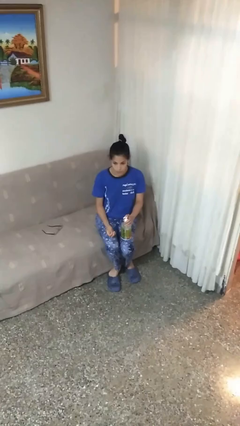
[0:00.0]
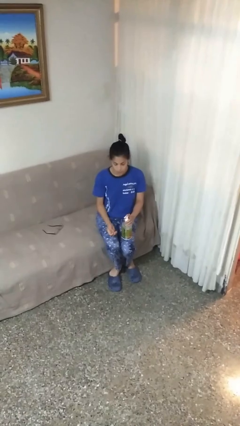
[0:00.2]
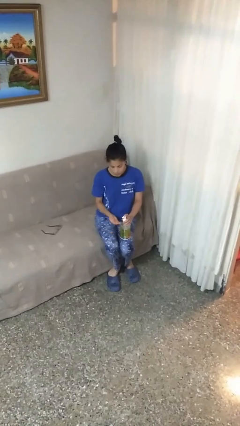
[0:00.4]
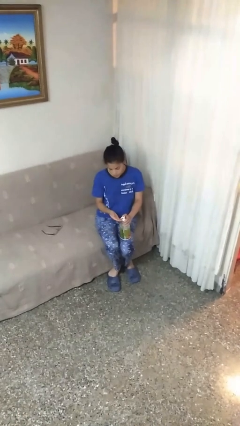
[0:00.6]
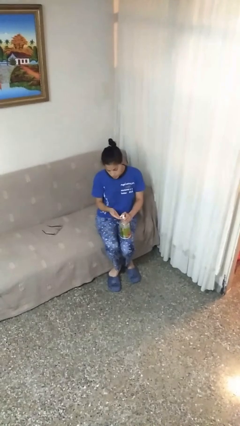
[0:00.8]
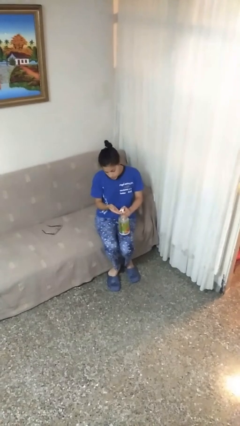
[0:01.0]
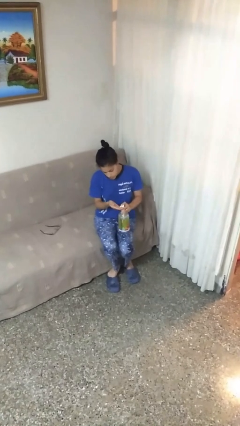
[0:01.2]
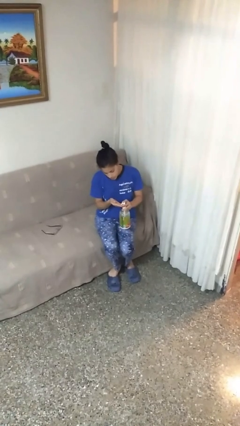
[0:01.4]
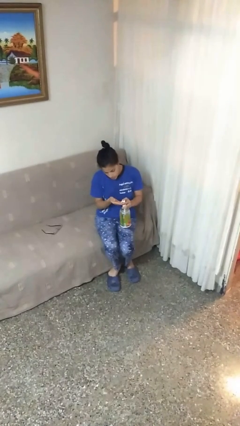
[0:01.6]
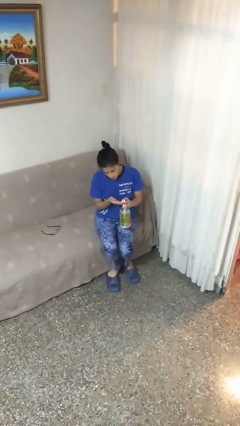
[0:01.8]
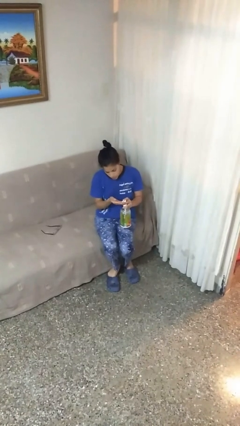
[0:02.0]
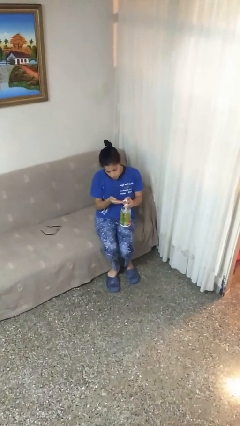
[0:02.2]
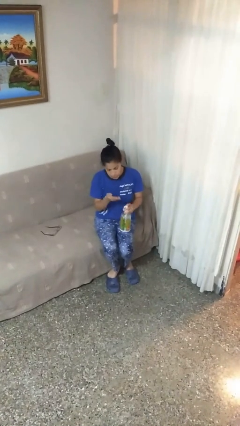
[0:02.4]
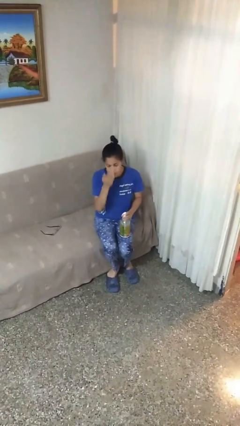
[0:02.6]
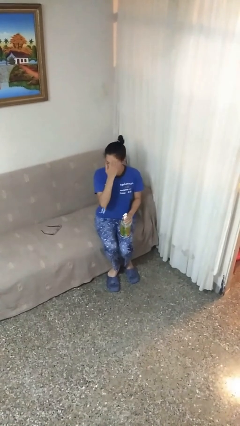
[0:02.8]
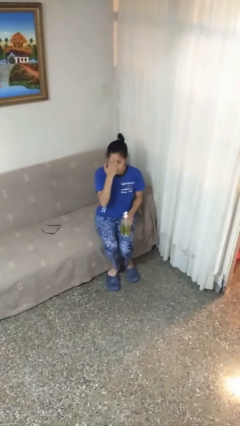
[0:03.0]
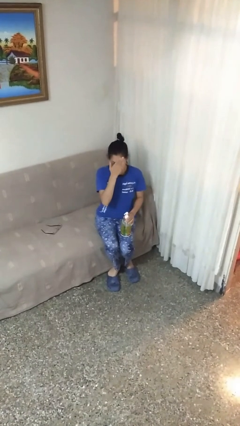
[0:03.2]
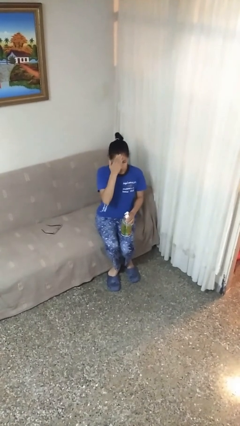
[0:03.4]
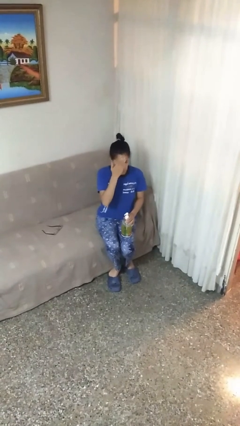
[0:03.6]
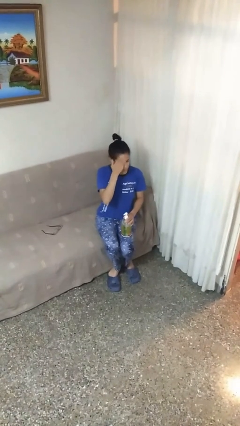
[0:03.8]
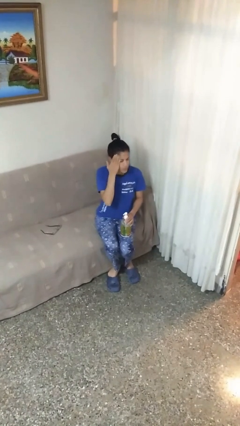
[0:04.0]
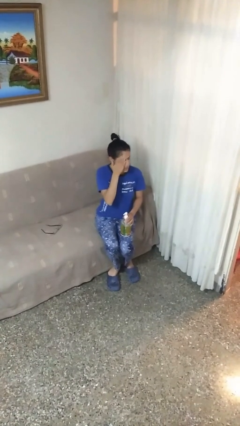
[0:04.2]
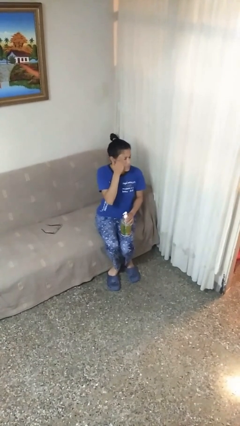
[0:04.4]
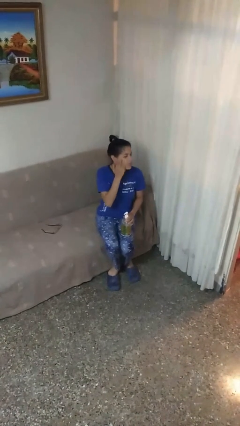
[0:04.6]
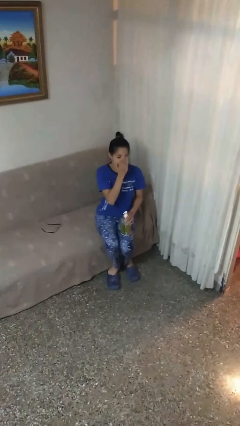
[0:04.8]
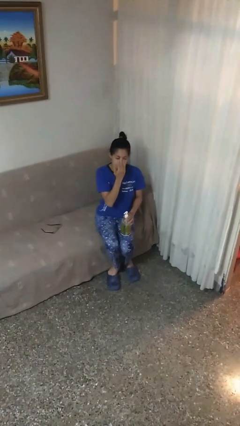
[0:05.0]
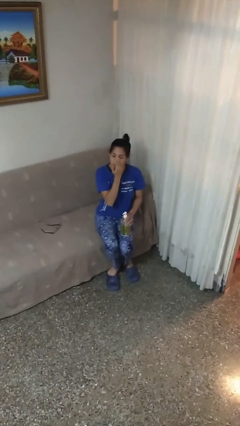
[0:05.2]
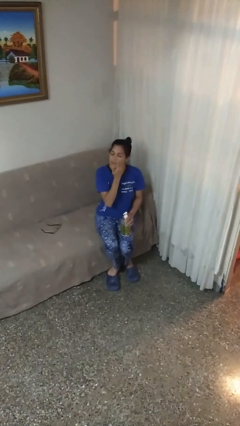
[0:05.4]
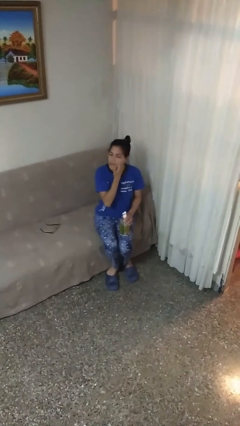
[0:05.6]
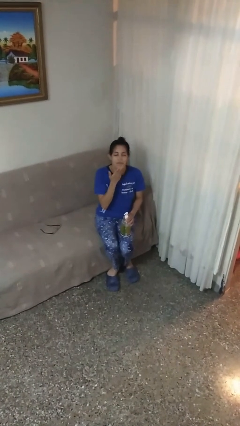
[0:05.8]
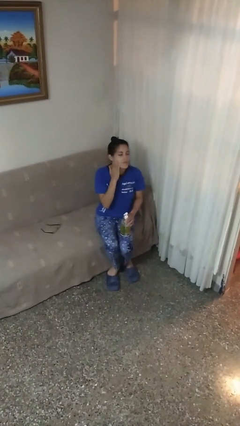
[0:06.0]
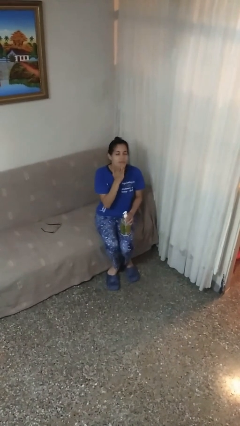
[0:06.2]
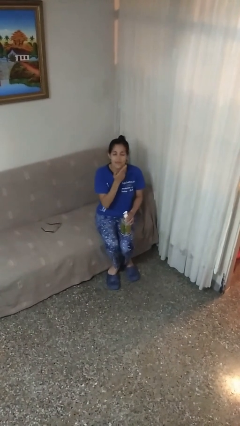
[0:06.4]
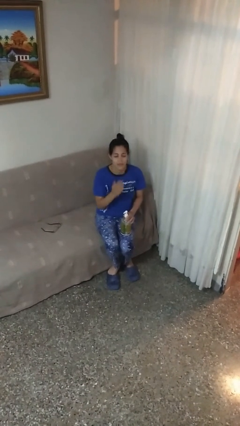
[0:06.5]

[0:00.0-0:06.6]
person applies facial moisturizer

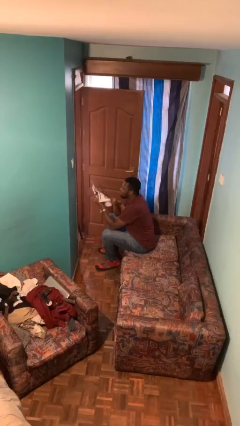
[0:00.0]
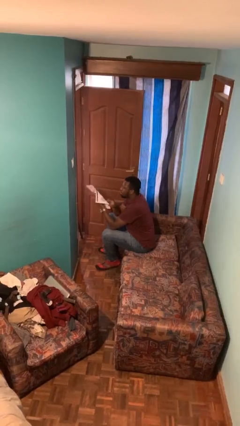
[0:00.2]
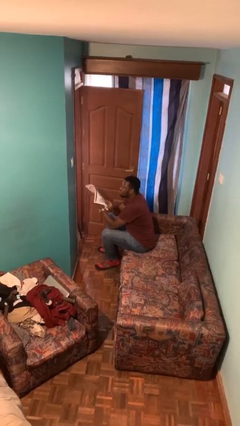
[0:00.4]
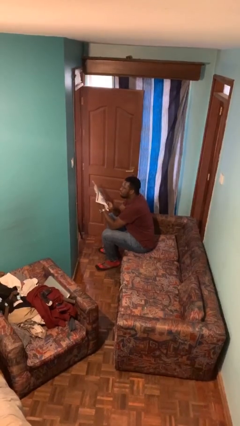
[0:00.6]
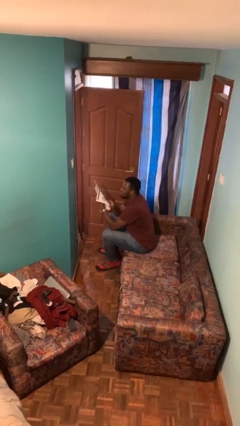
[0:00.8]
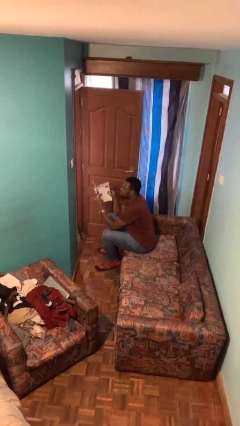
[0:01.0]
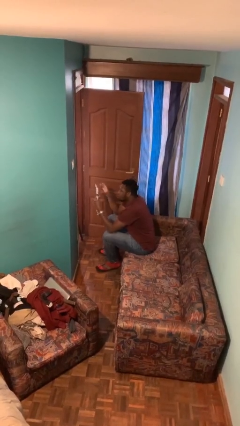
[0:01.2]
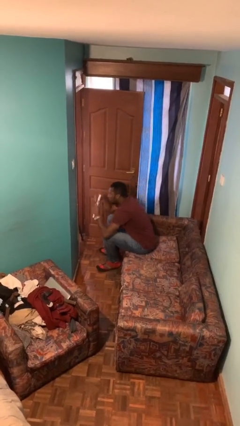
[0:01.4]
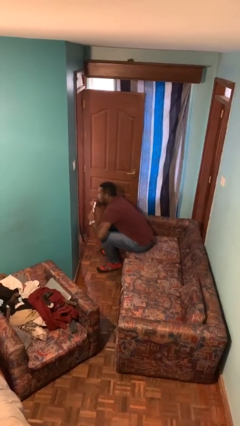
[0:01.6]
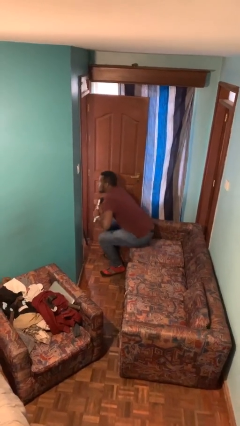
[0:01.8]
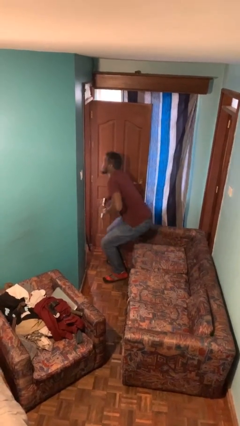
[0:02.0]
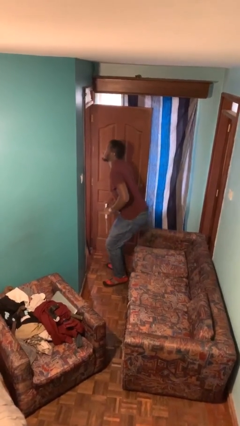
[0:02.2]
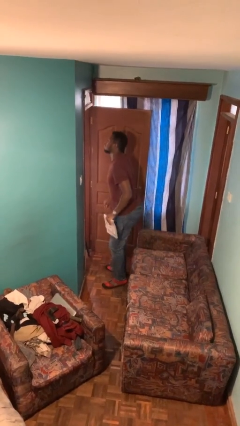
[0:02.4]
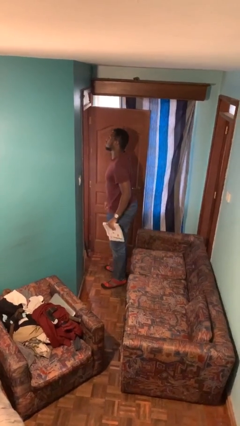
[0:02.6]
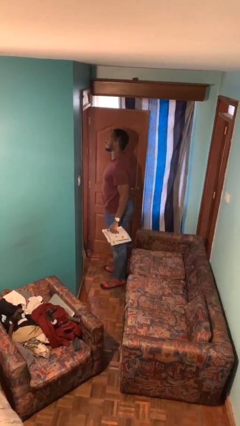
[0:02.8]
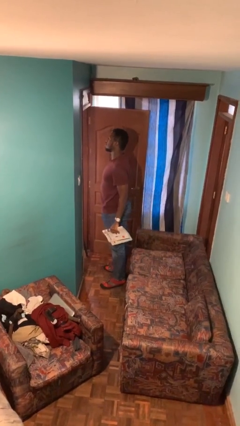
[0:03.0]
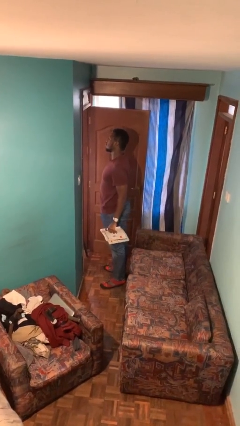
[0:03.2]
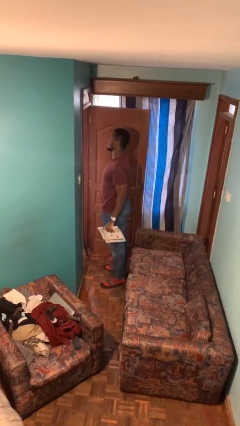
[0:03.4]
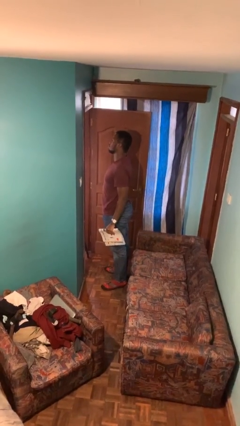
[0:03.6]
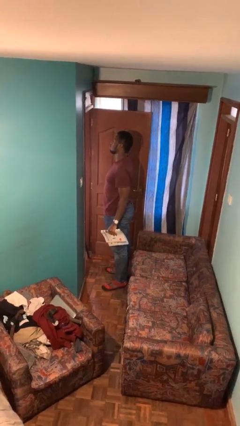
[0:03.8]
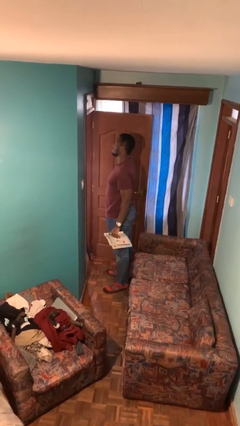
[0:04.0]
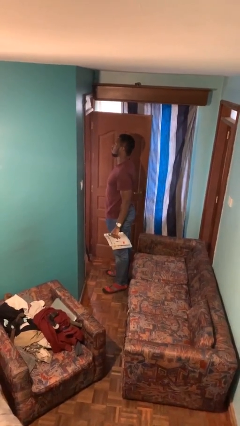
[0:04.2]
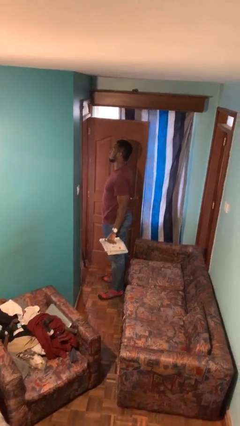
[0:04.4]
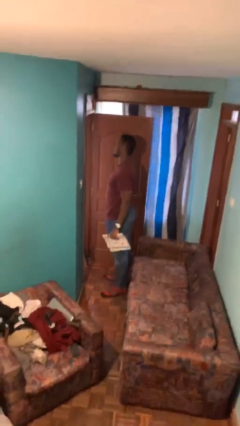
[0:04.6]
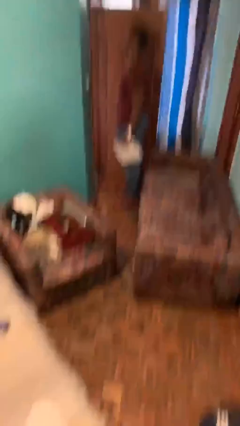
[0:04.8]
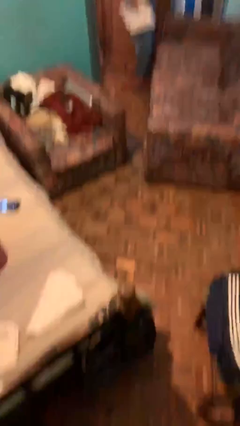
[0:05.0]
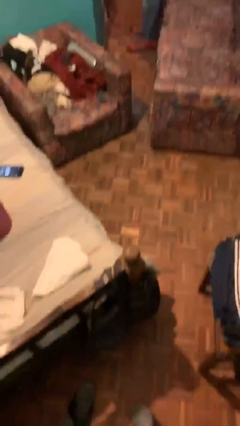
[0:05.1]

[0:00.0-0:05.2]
person stands up

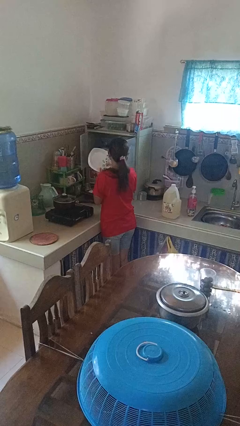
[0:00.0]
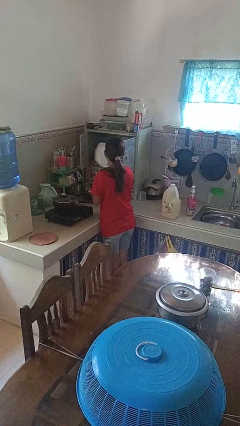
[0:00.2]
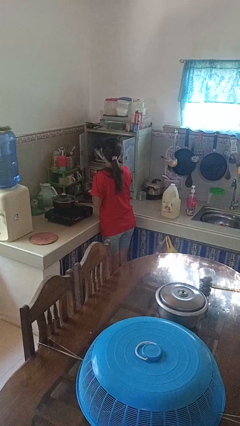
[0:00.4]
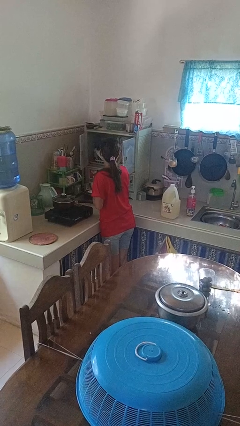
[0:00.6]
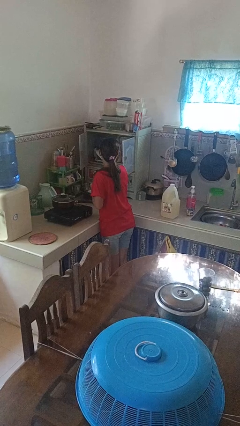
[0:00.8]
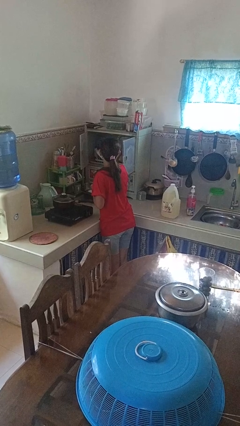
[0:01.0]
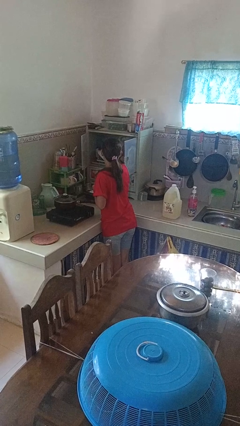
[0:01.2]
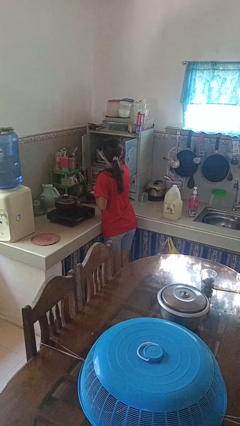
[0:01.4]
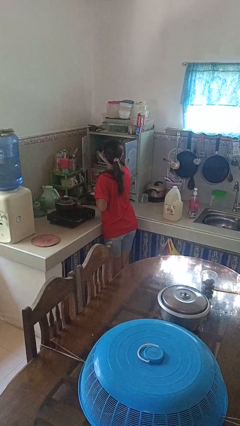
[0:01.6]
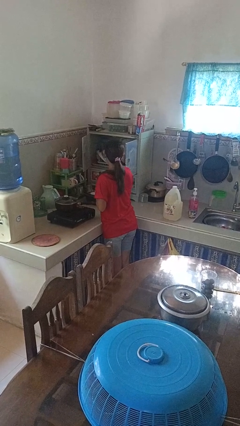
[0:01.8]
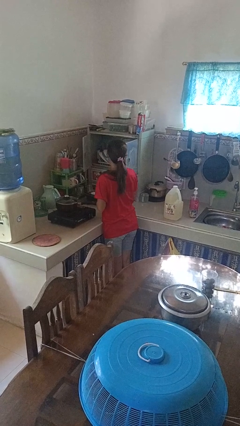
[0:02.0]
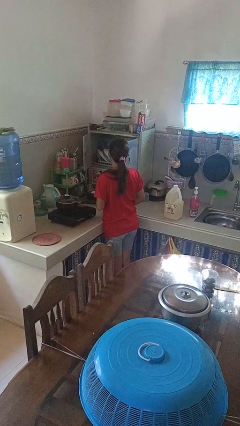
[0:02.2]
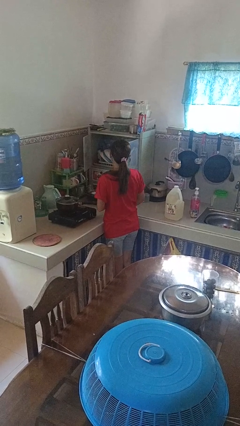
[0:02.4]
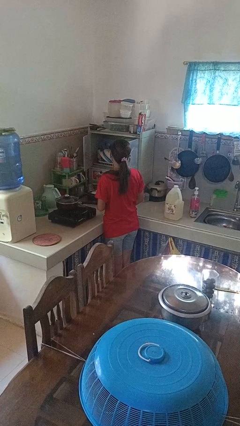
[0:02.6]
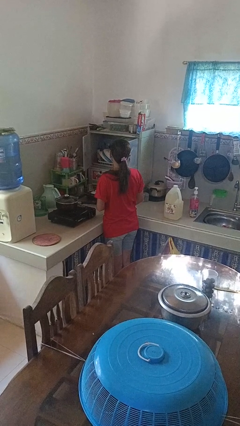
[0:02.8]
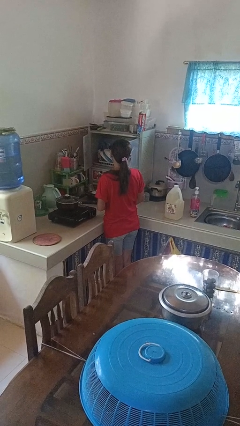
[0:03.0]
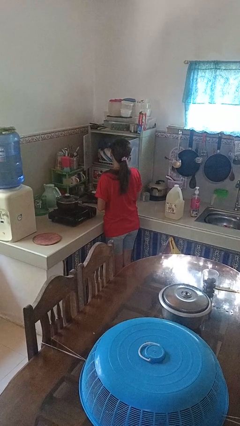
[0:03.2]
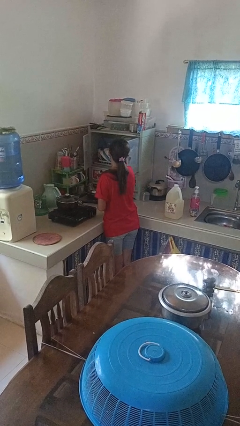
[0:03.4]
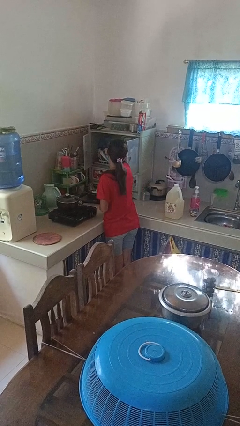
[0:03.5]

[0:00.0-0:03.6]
person puts object in cabinet

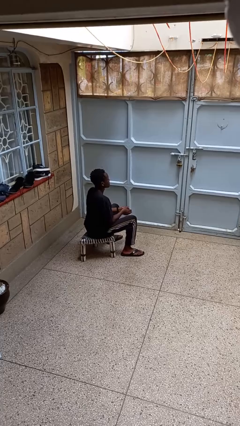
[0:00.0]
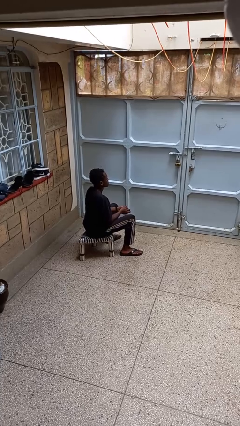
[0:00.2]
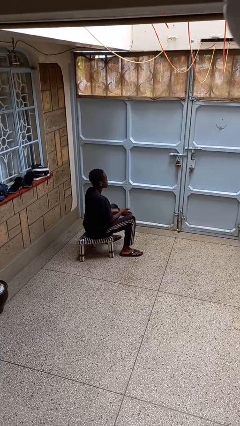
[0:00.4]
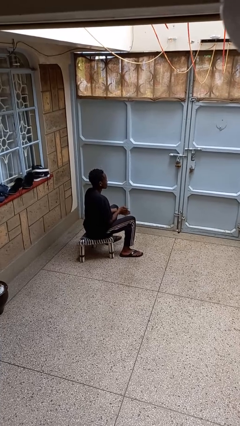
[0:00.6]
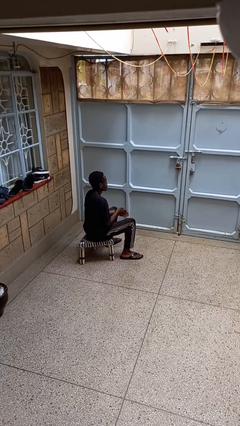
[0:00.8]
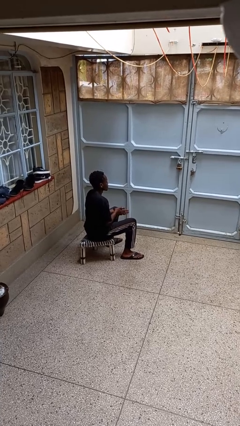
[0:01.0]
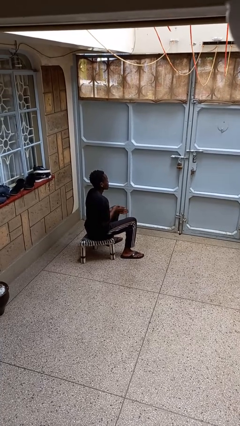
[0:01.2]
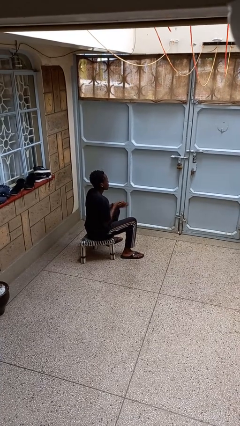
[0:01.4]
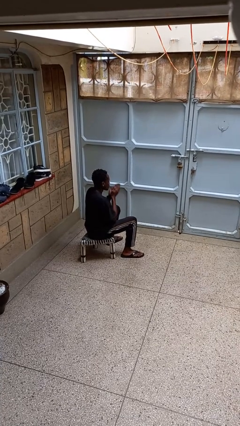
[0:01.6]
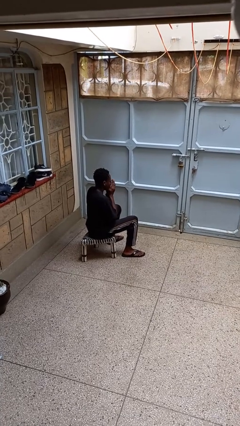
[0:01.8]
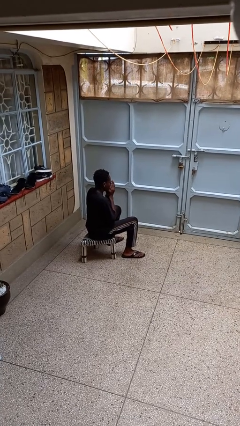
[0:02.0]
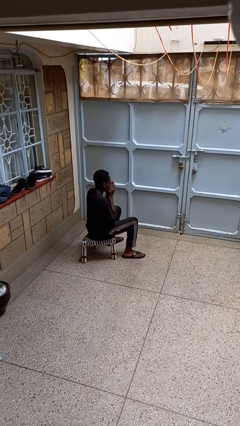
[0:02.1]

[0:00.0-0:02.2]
person blows into hands

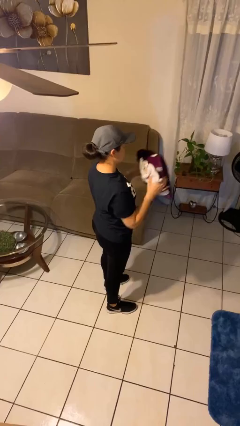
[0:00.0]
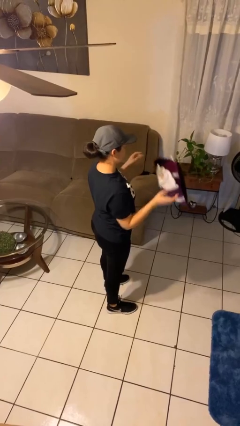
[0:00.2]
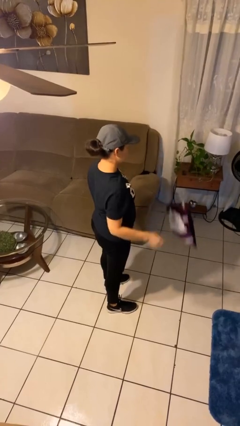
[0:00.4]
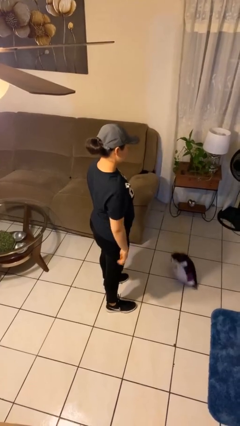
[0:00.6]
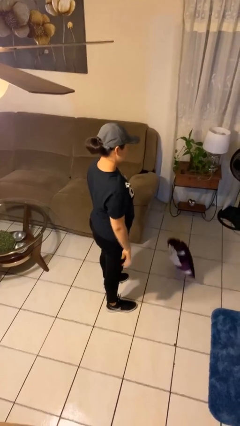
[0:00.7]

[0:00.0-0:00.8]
person throws object to ground
